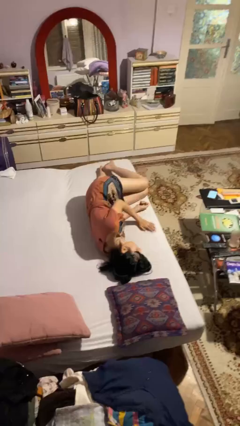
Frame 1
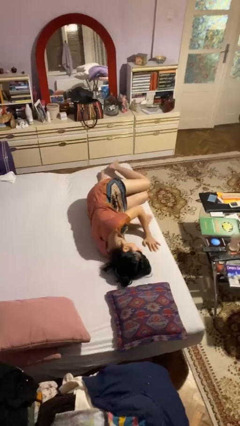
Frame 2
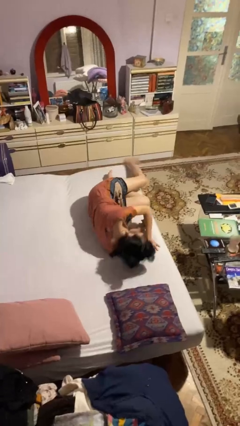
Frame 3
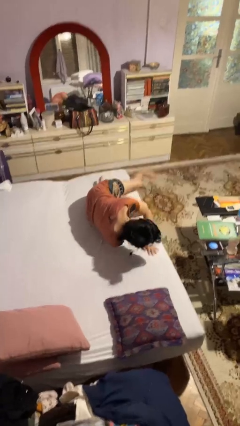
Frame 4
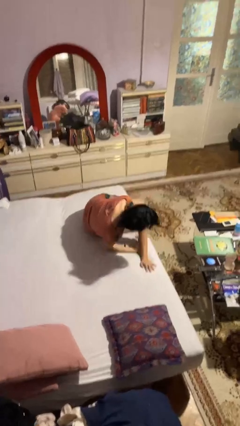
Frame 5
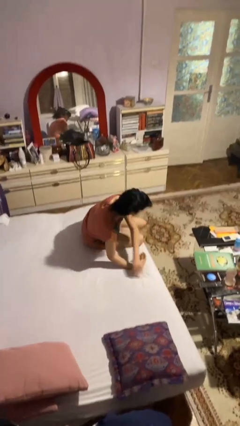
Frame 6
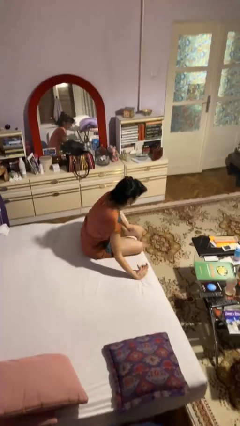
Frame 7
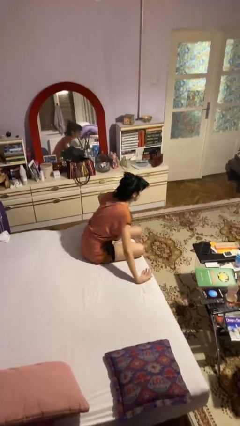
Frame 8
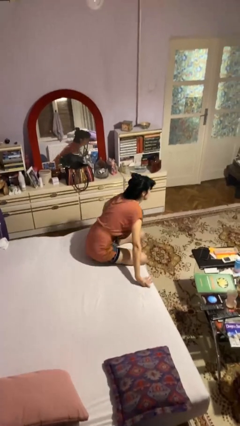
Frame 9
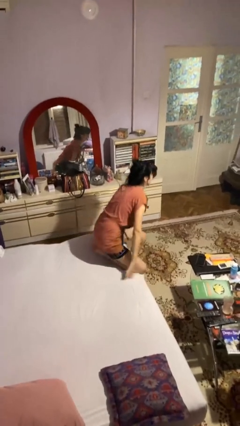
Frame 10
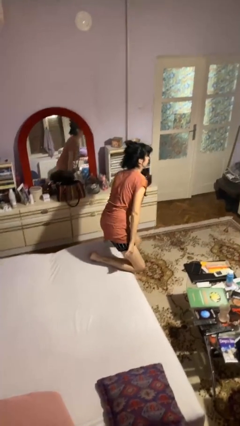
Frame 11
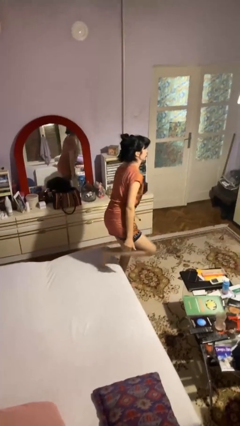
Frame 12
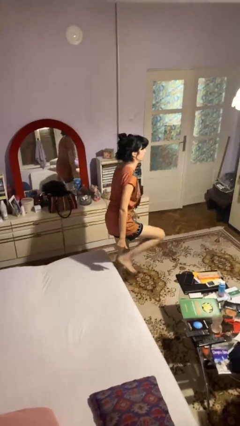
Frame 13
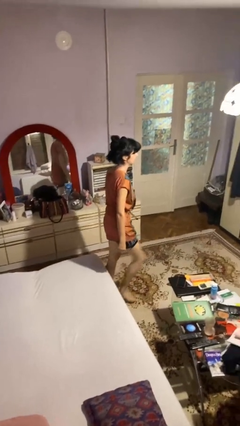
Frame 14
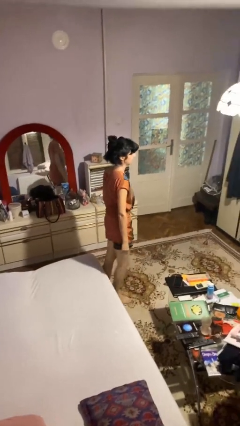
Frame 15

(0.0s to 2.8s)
person stands up

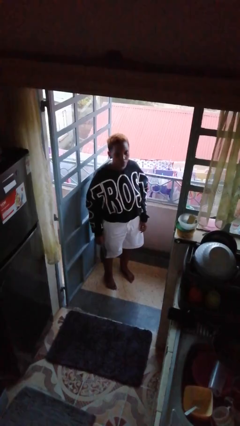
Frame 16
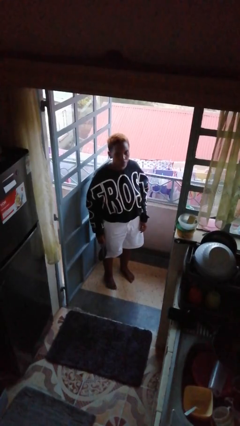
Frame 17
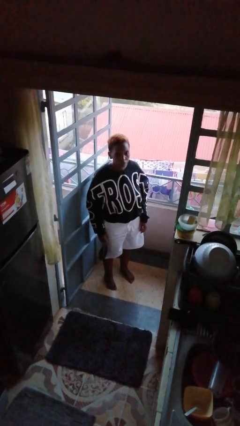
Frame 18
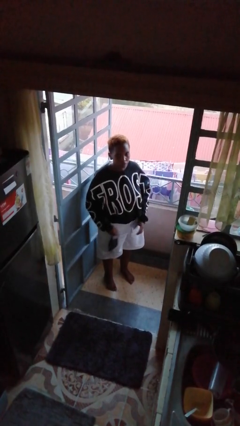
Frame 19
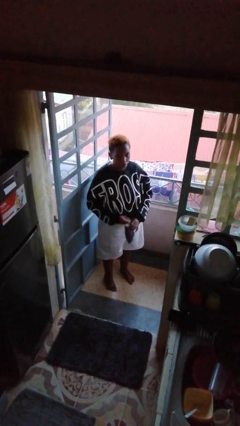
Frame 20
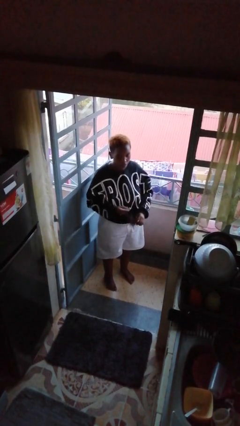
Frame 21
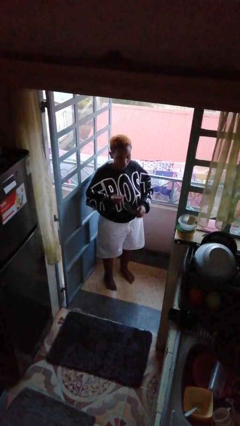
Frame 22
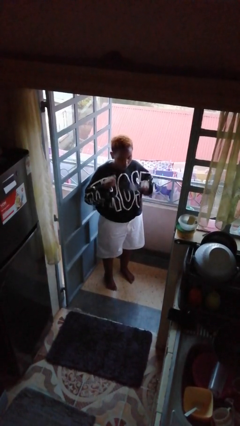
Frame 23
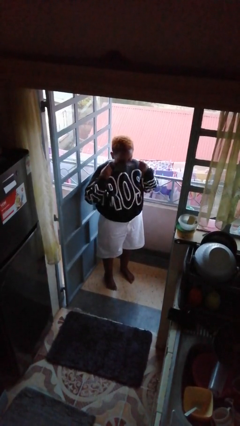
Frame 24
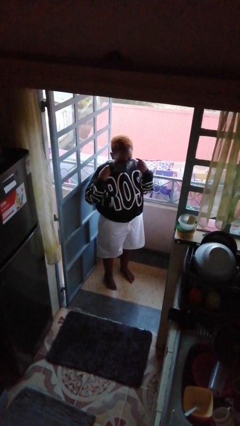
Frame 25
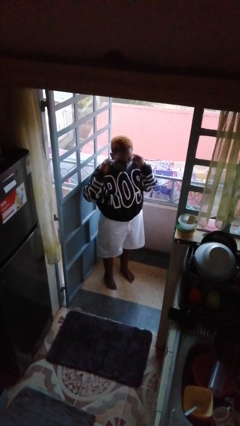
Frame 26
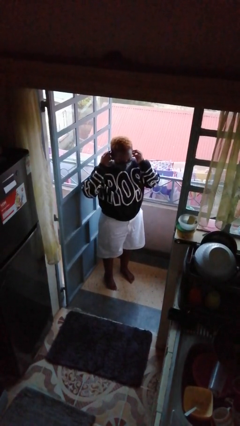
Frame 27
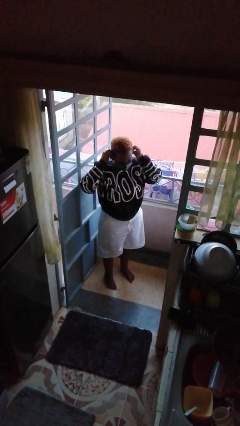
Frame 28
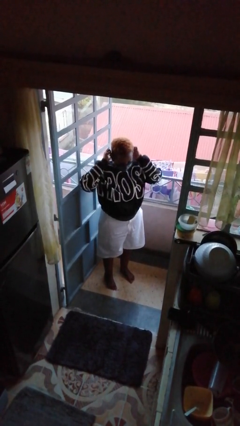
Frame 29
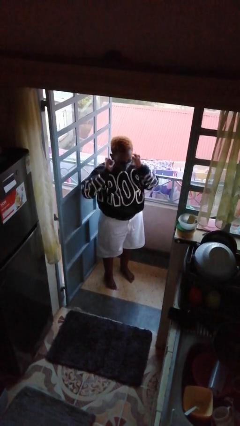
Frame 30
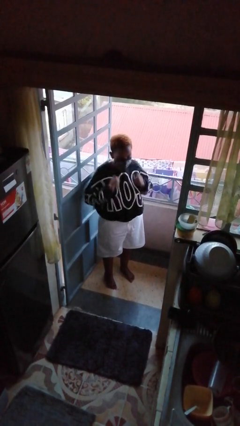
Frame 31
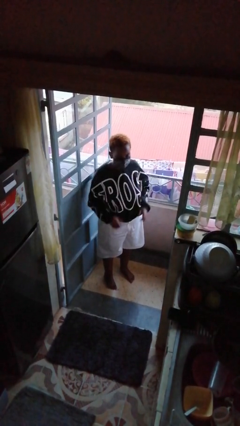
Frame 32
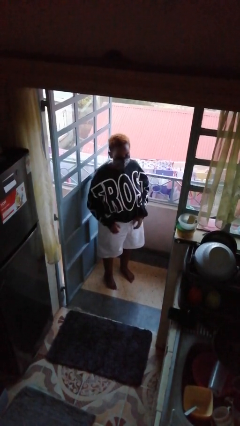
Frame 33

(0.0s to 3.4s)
person puts on facemask

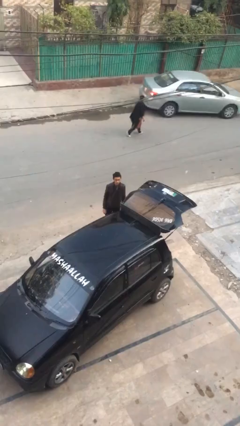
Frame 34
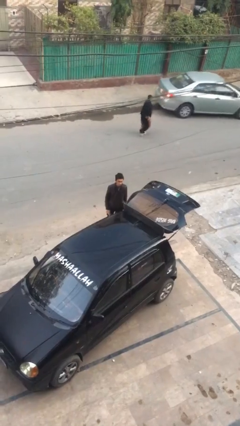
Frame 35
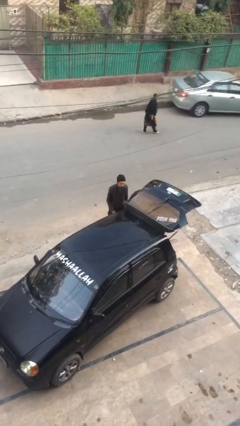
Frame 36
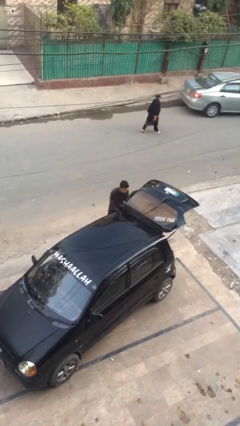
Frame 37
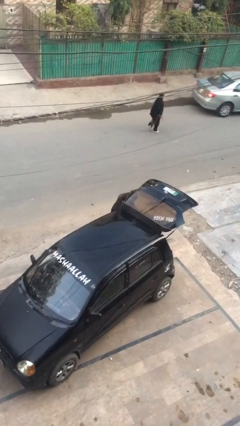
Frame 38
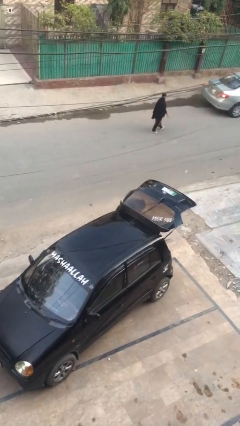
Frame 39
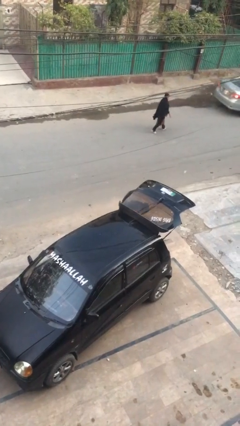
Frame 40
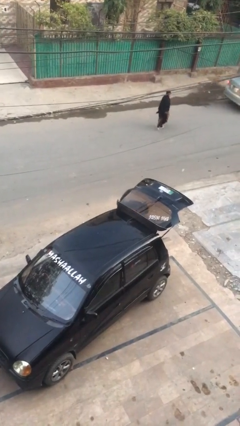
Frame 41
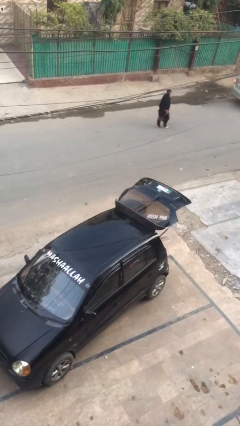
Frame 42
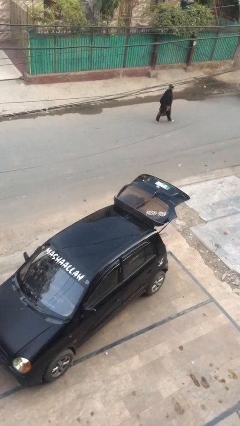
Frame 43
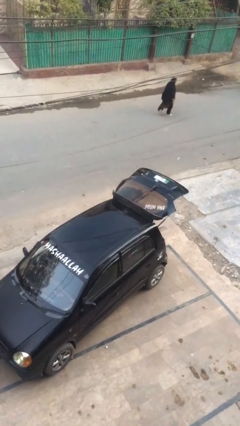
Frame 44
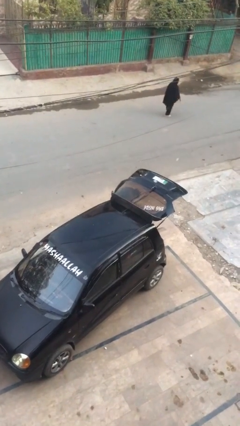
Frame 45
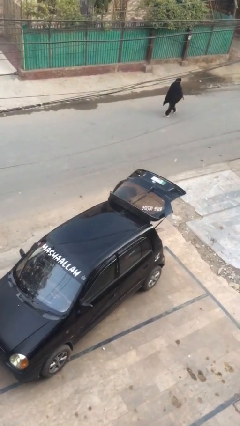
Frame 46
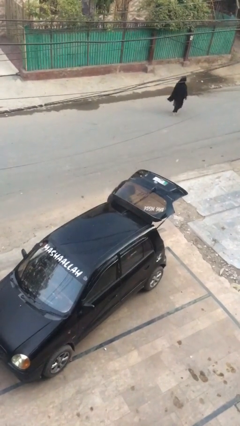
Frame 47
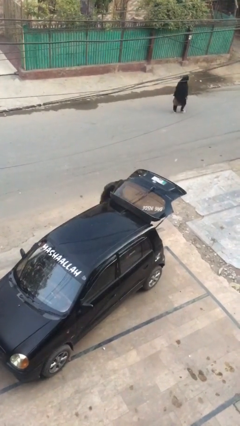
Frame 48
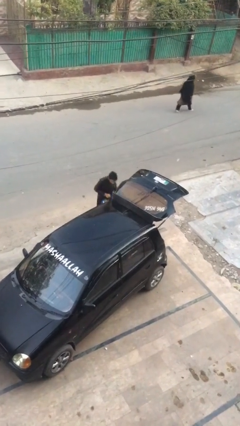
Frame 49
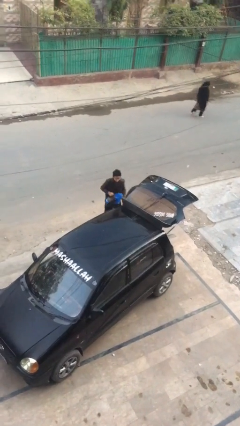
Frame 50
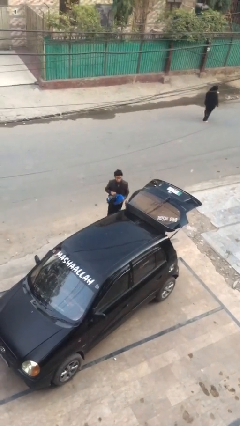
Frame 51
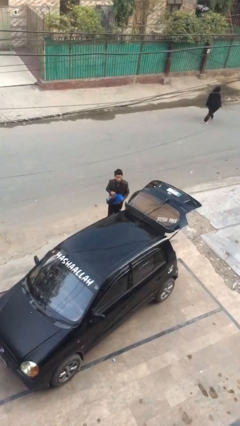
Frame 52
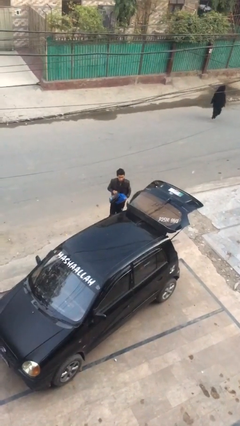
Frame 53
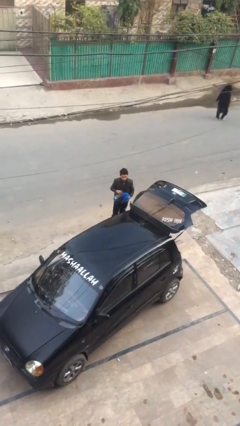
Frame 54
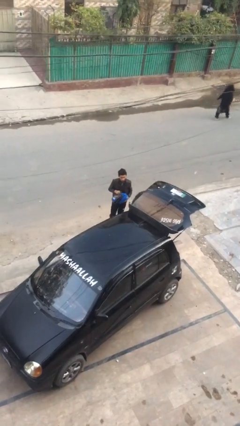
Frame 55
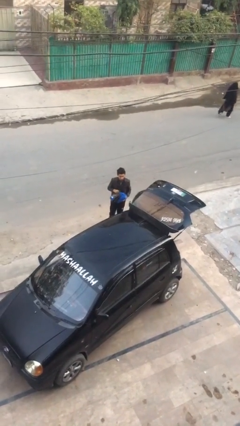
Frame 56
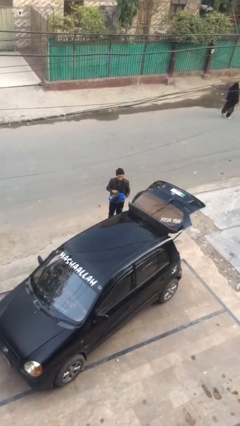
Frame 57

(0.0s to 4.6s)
person unloads car

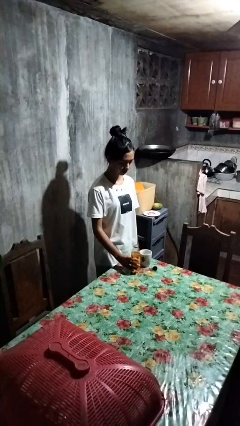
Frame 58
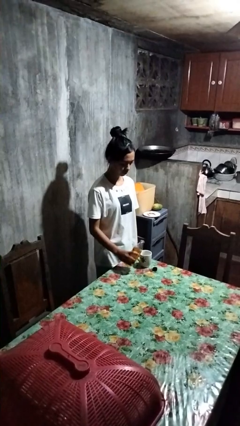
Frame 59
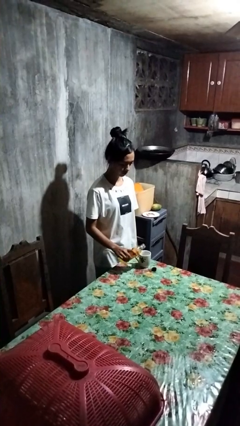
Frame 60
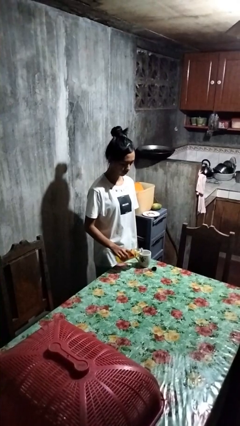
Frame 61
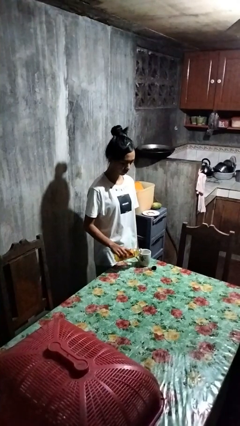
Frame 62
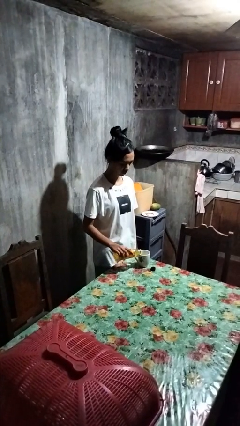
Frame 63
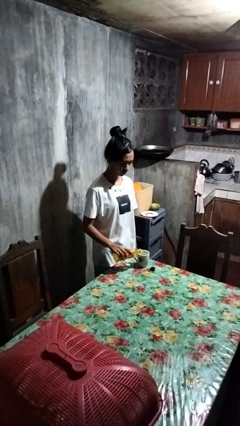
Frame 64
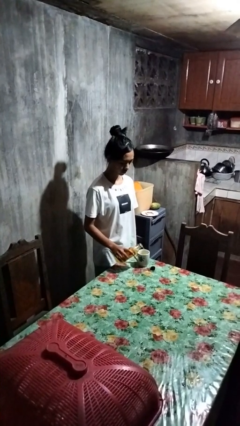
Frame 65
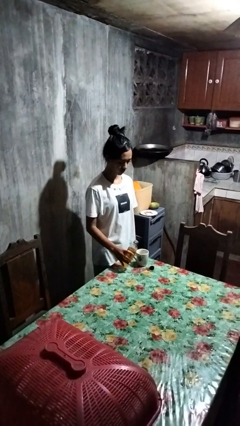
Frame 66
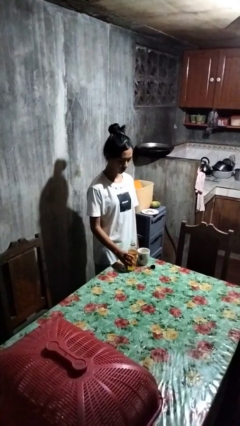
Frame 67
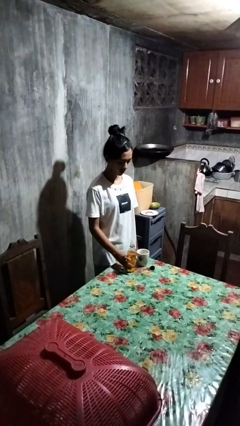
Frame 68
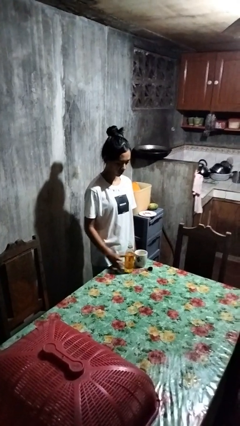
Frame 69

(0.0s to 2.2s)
person pours liquid into cup

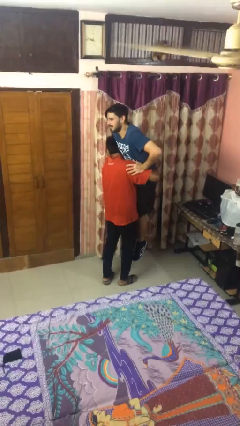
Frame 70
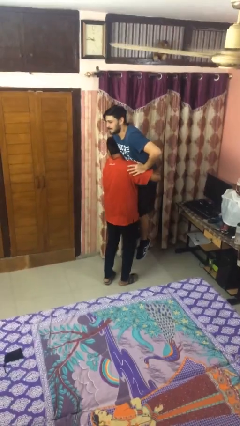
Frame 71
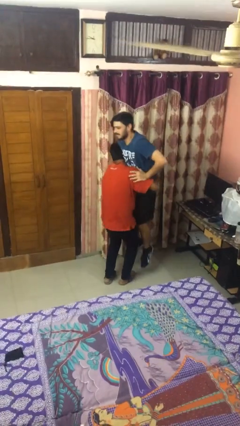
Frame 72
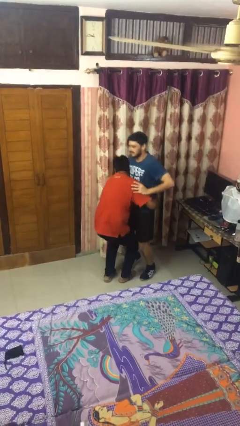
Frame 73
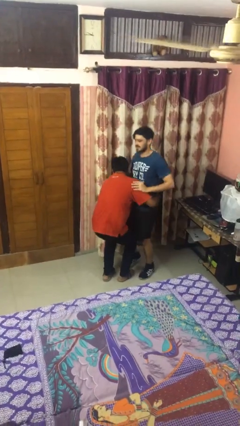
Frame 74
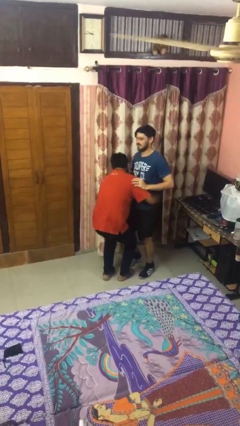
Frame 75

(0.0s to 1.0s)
person puts down person

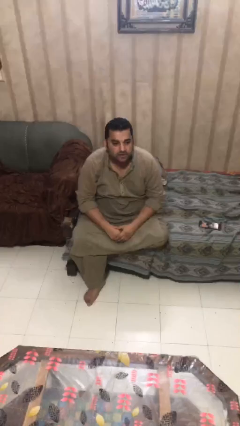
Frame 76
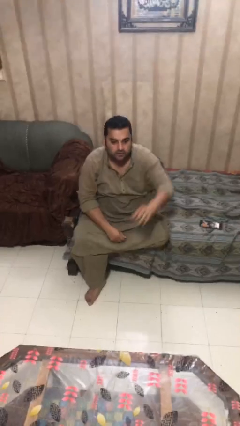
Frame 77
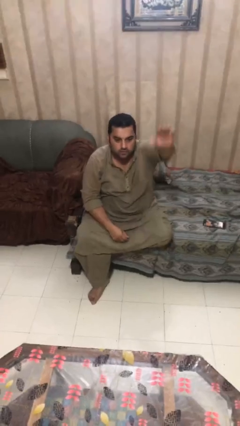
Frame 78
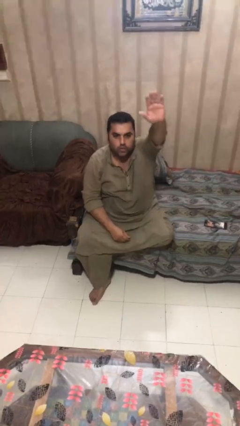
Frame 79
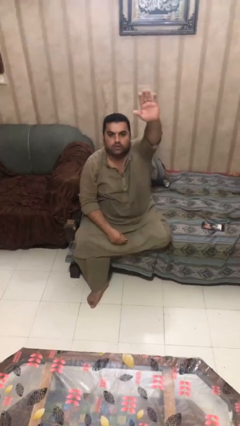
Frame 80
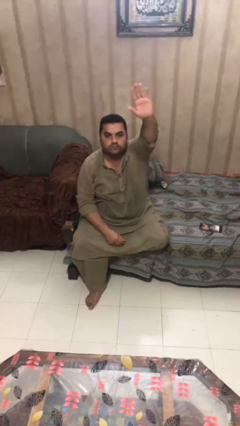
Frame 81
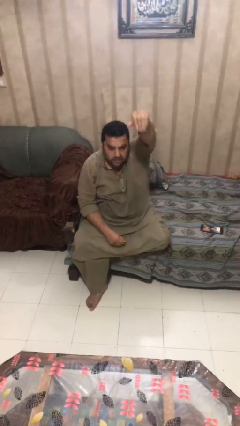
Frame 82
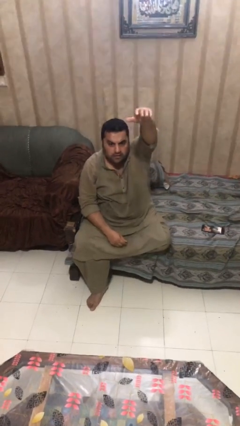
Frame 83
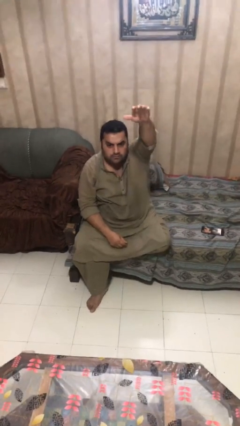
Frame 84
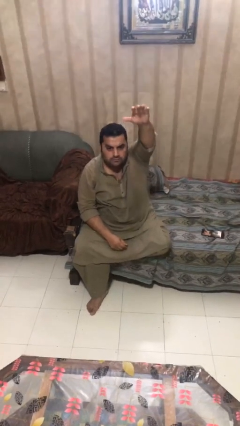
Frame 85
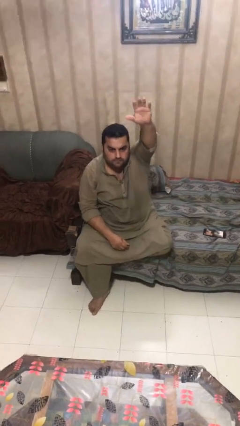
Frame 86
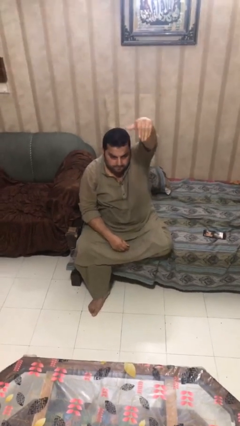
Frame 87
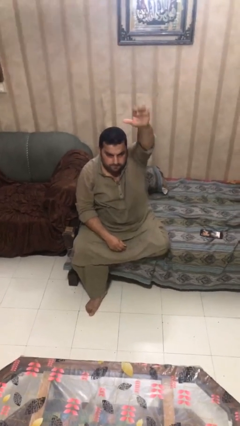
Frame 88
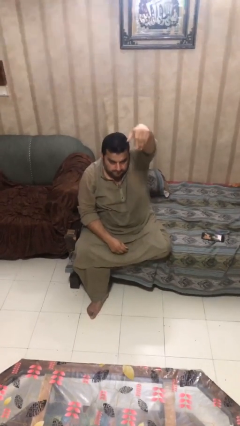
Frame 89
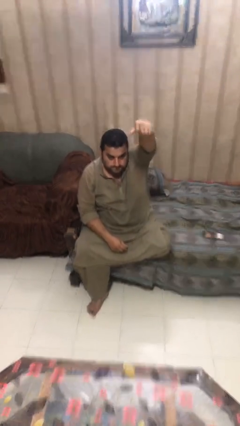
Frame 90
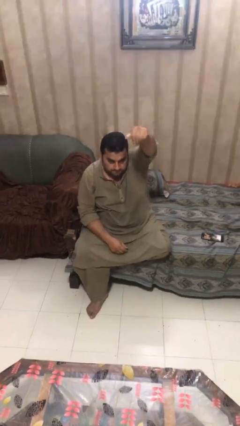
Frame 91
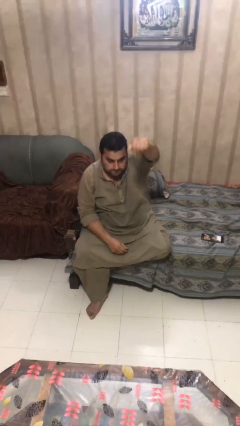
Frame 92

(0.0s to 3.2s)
person gestures come here

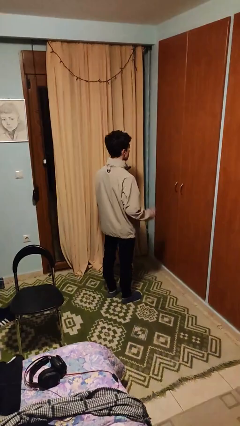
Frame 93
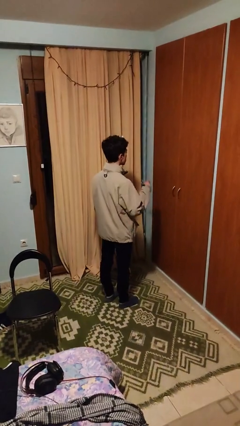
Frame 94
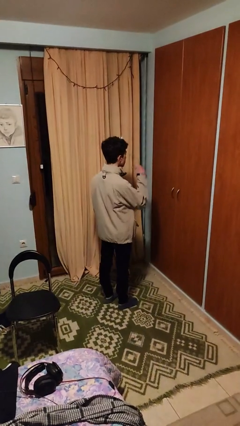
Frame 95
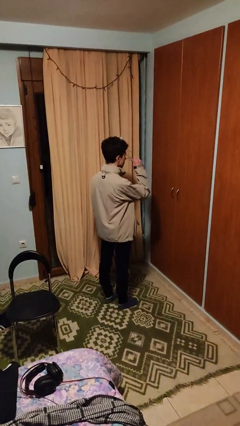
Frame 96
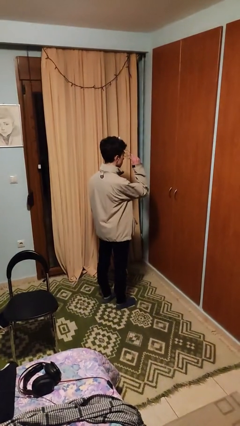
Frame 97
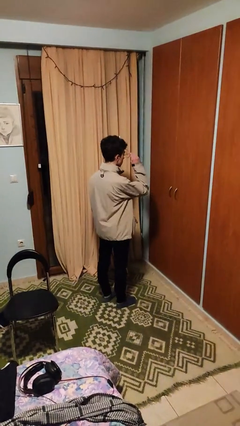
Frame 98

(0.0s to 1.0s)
person puts on glasses
